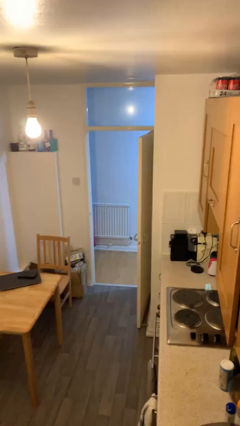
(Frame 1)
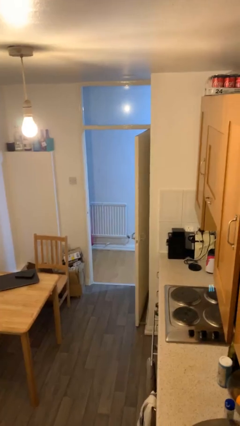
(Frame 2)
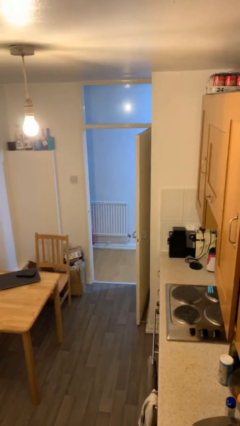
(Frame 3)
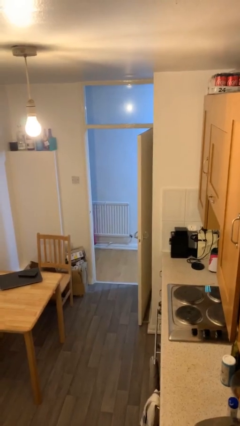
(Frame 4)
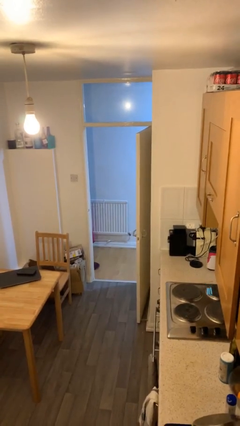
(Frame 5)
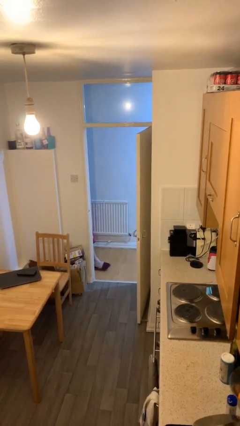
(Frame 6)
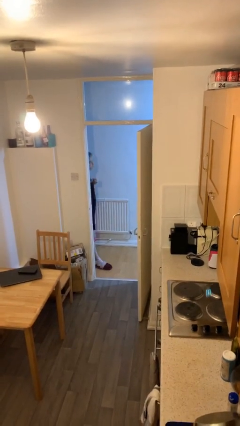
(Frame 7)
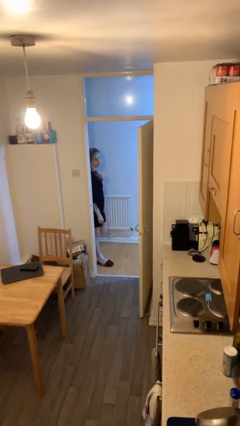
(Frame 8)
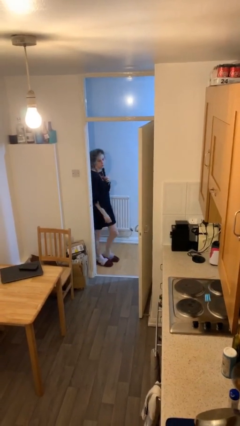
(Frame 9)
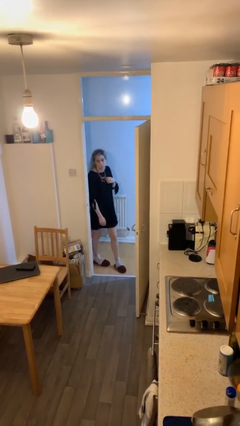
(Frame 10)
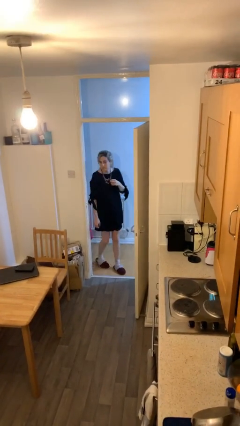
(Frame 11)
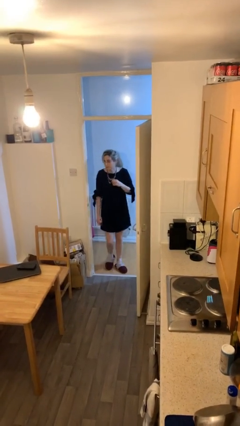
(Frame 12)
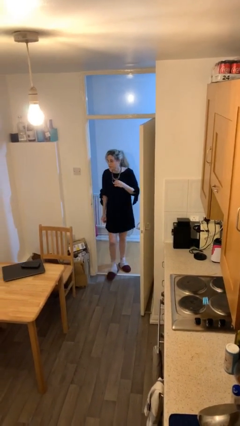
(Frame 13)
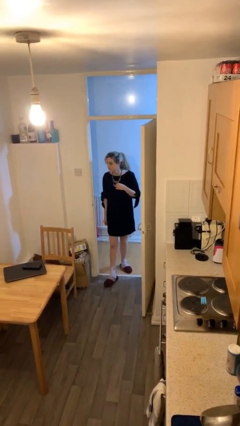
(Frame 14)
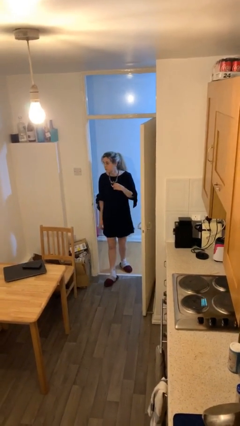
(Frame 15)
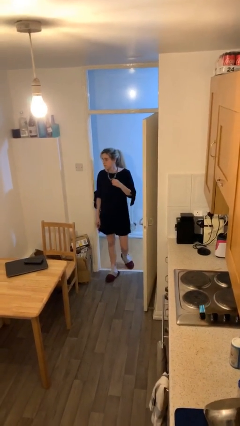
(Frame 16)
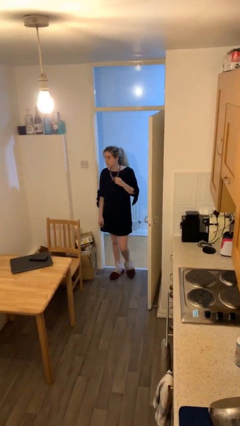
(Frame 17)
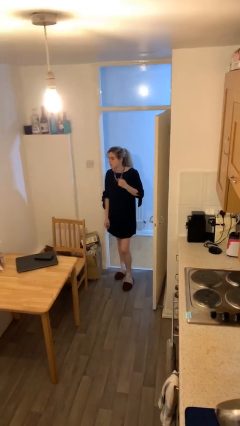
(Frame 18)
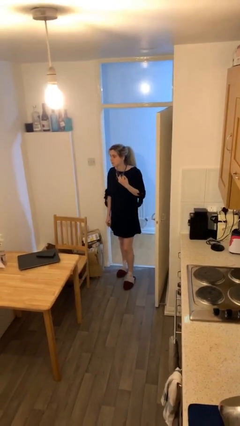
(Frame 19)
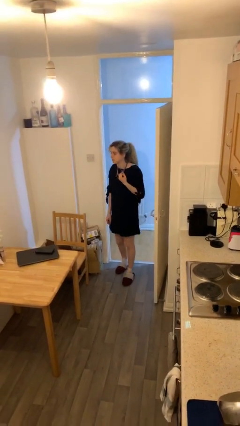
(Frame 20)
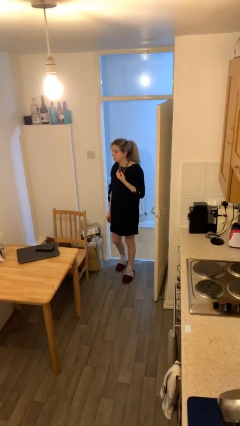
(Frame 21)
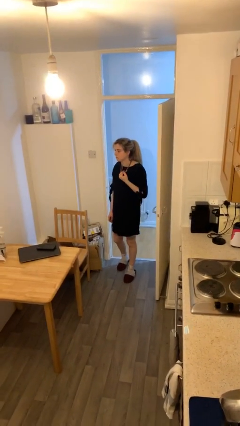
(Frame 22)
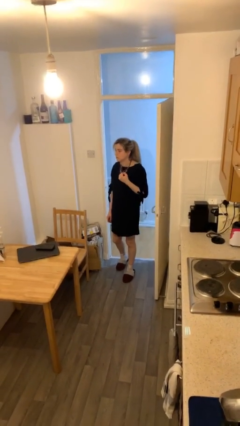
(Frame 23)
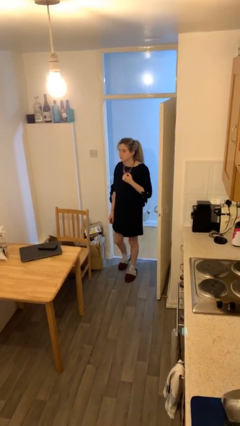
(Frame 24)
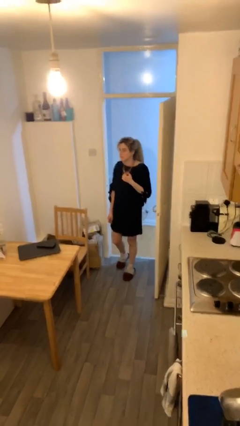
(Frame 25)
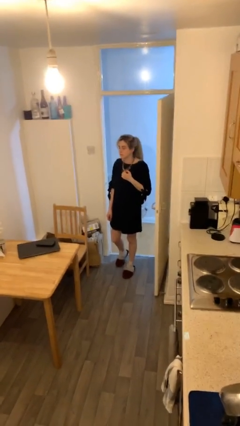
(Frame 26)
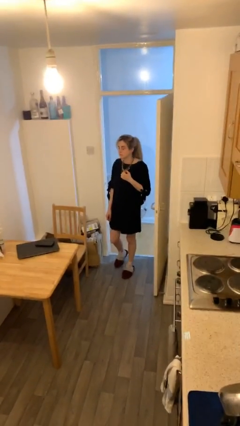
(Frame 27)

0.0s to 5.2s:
person enters scene through structure

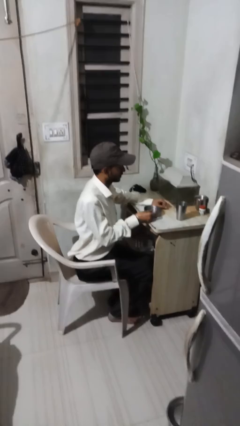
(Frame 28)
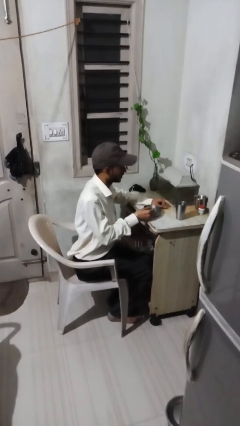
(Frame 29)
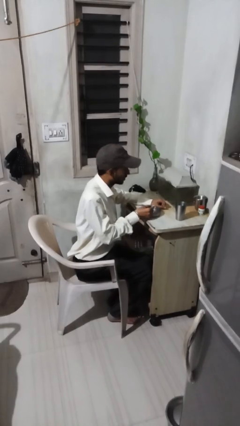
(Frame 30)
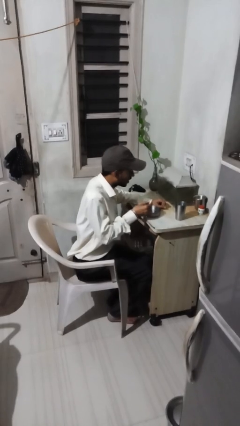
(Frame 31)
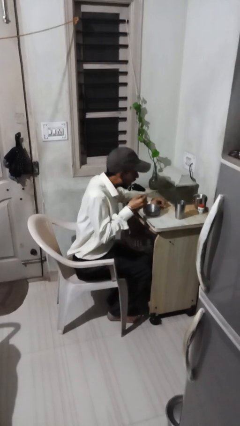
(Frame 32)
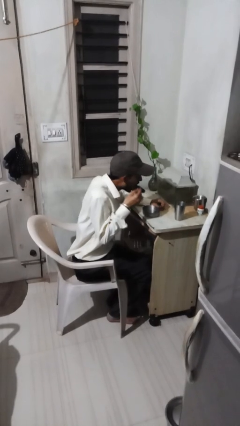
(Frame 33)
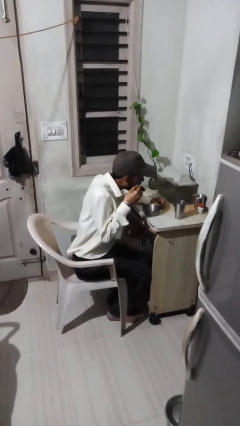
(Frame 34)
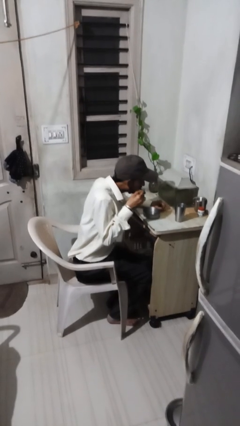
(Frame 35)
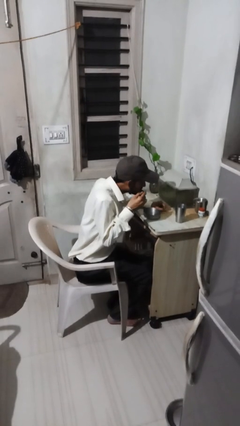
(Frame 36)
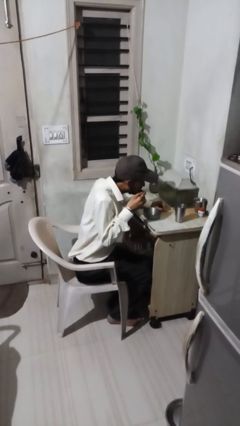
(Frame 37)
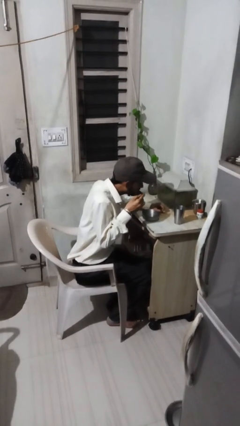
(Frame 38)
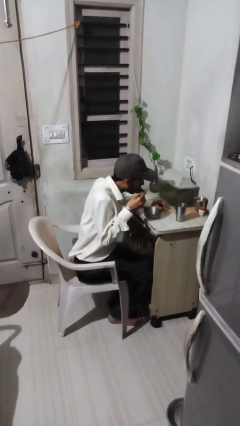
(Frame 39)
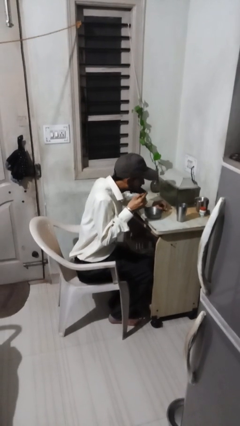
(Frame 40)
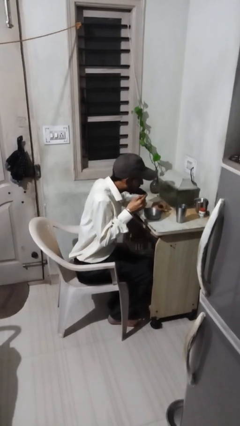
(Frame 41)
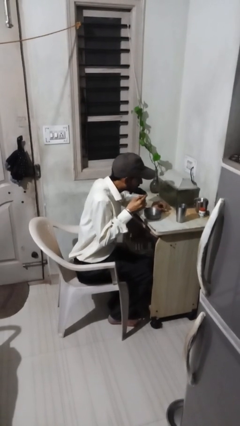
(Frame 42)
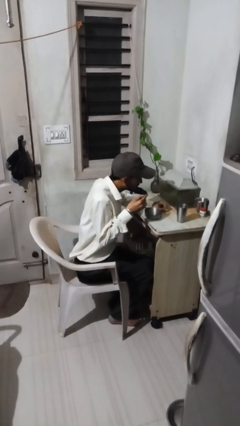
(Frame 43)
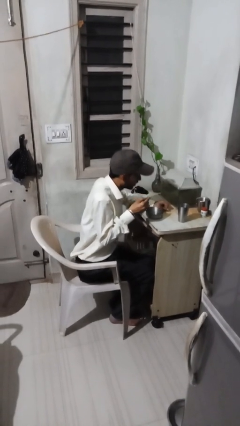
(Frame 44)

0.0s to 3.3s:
person eats with utensil

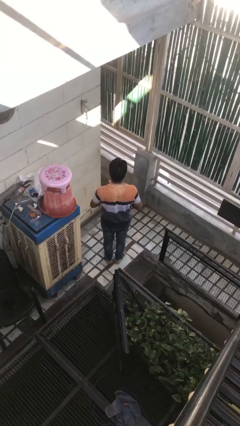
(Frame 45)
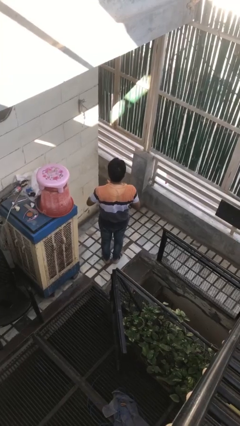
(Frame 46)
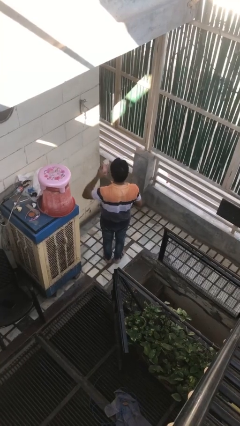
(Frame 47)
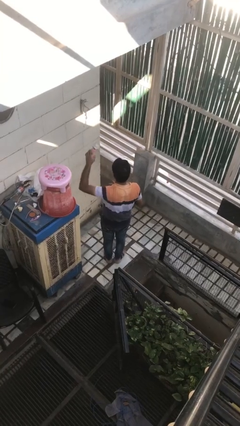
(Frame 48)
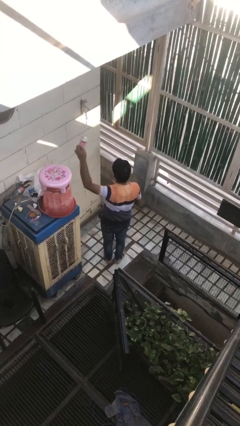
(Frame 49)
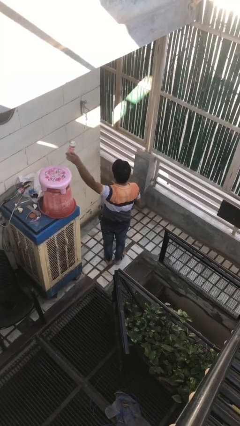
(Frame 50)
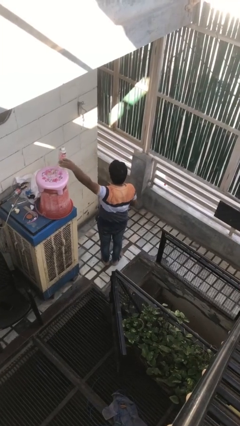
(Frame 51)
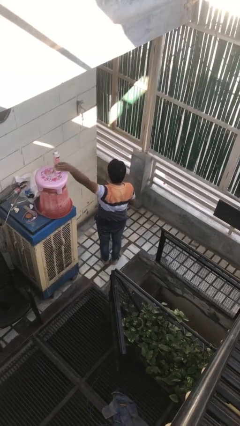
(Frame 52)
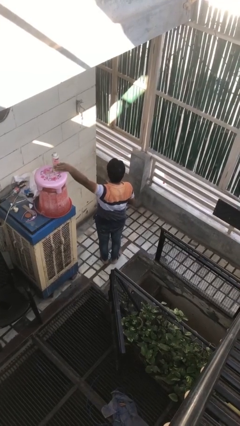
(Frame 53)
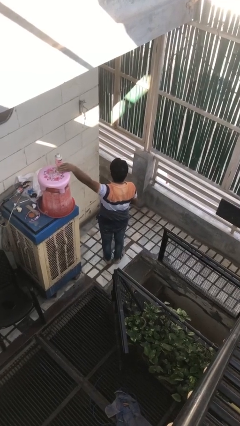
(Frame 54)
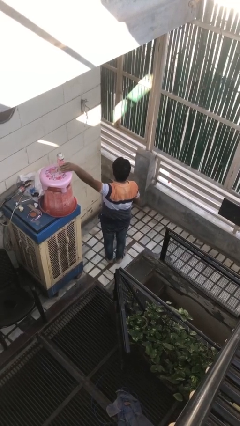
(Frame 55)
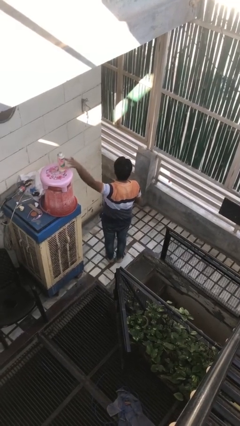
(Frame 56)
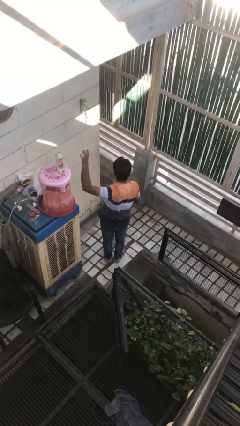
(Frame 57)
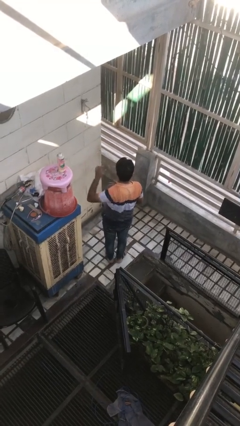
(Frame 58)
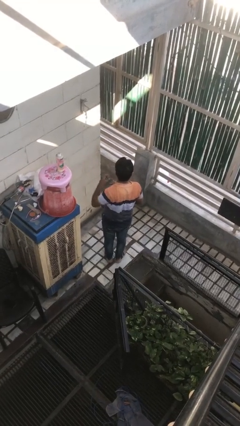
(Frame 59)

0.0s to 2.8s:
person puts down object on countertop

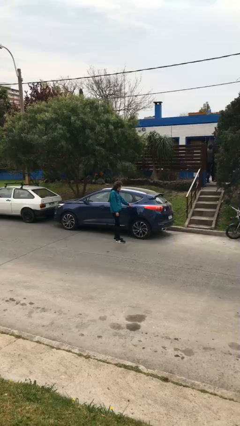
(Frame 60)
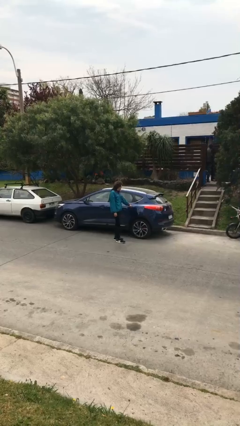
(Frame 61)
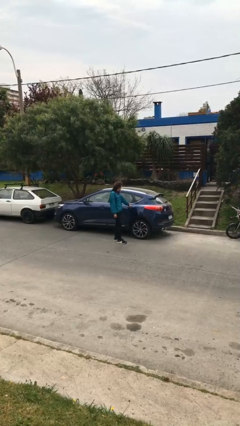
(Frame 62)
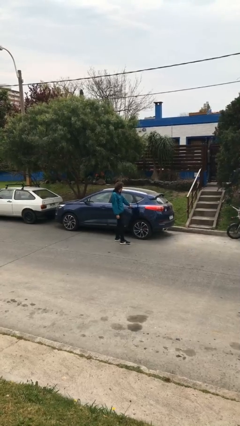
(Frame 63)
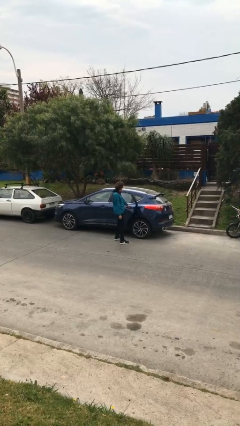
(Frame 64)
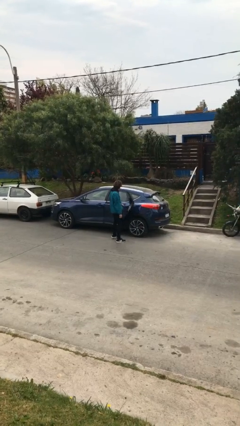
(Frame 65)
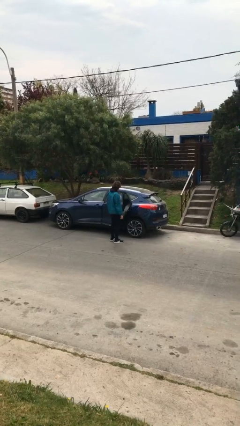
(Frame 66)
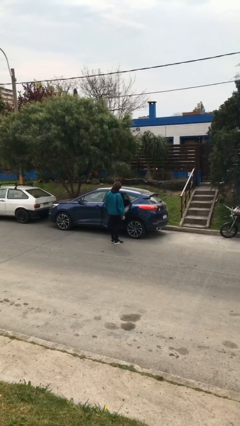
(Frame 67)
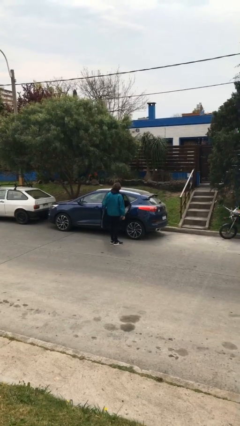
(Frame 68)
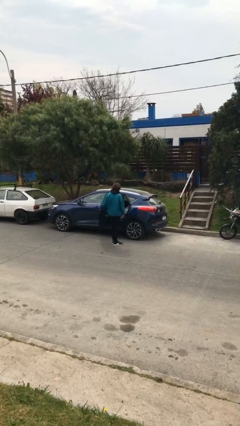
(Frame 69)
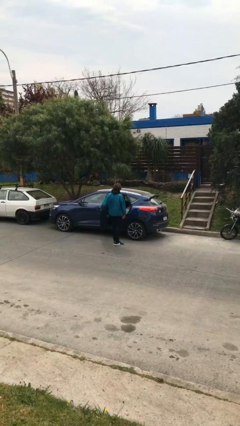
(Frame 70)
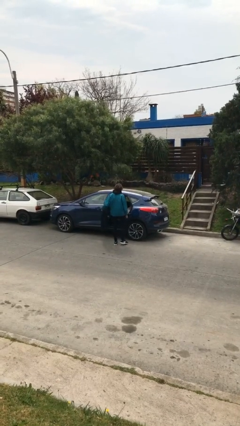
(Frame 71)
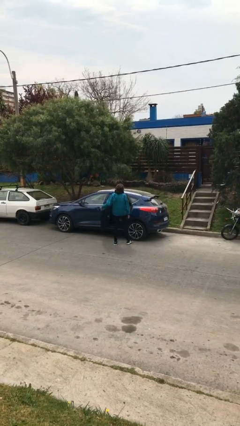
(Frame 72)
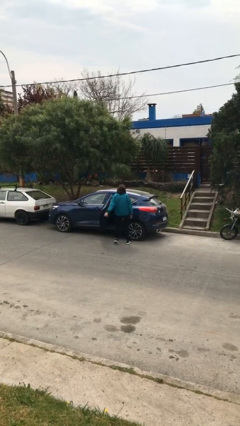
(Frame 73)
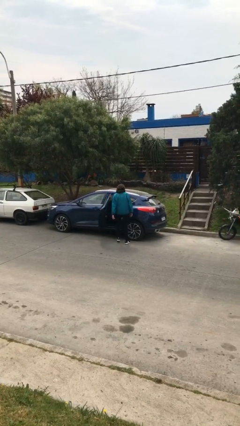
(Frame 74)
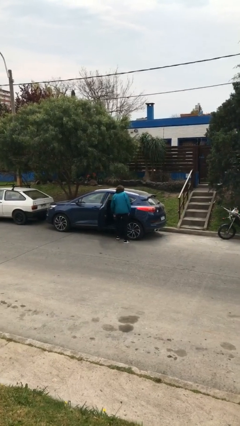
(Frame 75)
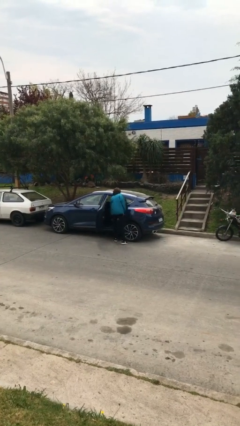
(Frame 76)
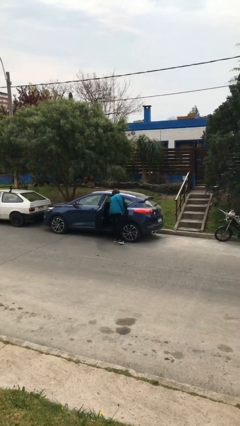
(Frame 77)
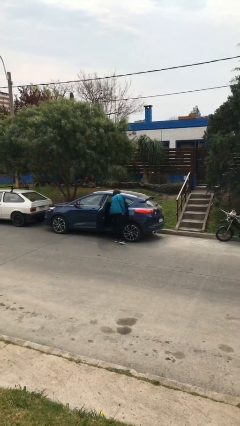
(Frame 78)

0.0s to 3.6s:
person opens car door

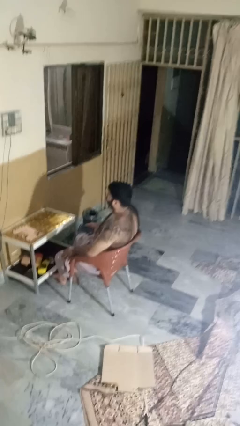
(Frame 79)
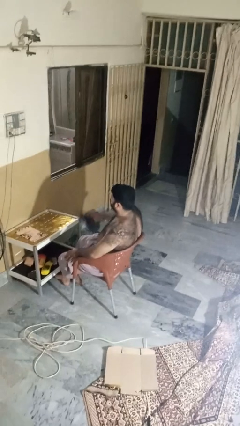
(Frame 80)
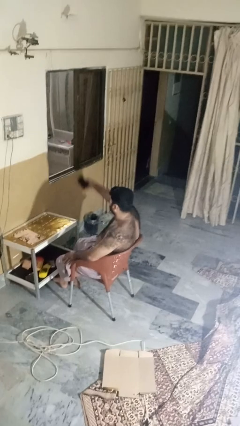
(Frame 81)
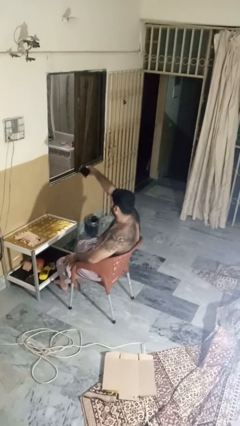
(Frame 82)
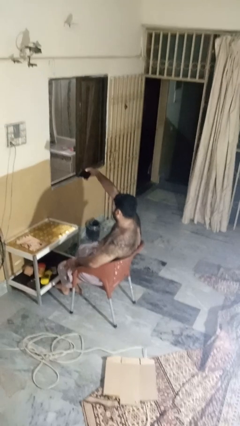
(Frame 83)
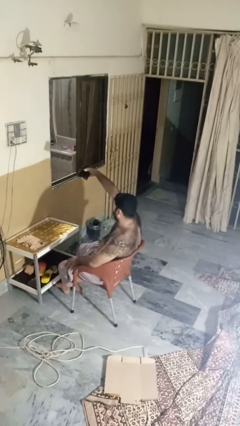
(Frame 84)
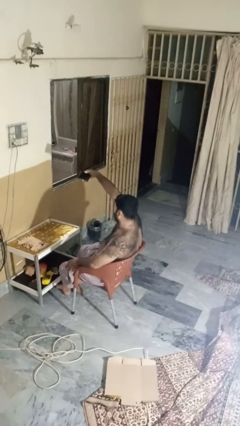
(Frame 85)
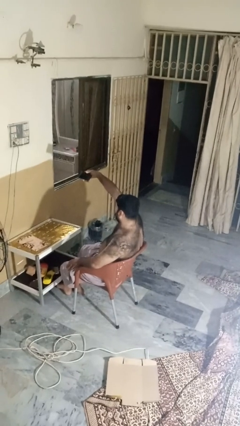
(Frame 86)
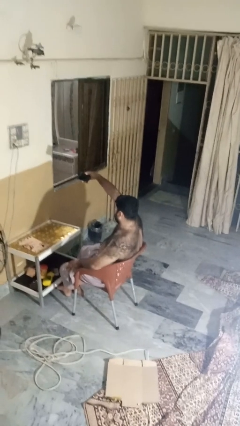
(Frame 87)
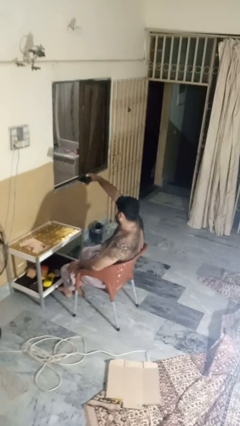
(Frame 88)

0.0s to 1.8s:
person takes selfie

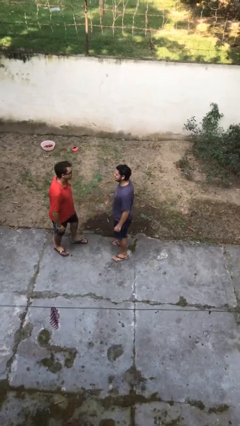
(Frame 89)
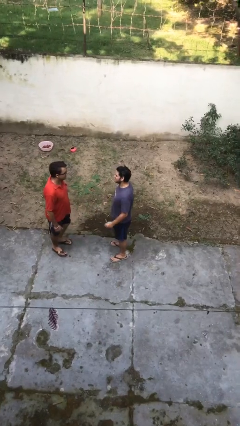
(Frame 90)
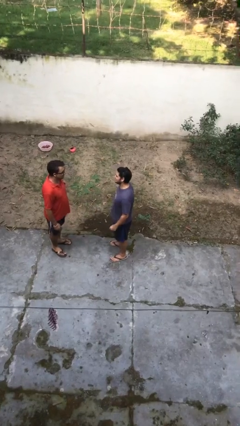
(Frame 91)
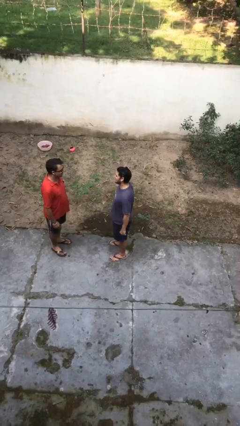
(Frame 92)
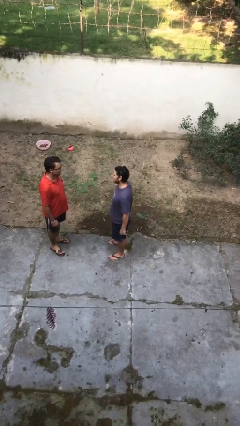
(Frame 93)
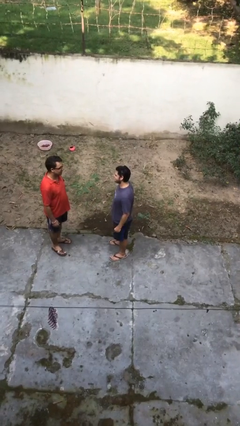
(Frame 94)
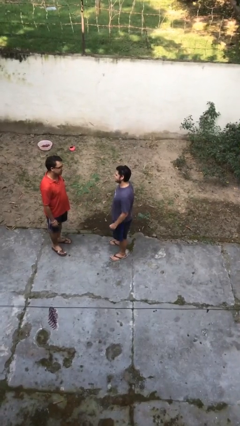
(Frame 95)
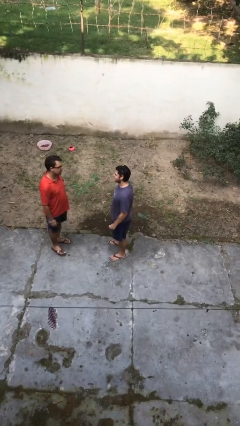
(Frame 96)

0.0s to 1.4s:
person talks to person
